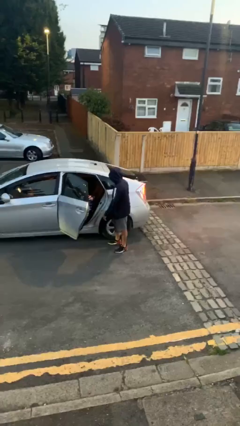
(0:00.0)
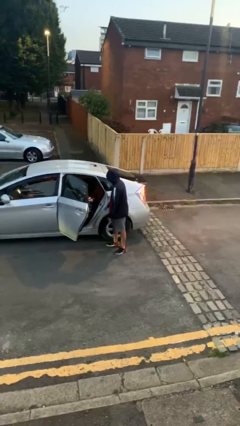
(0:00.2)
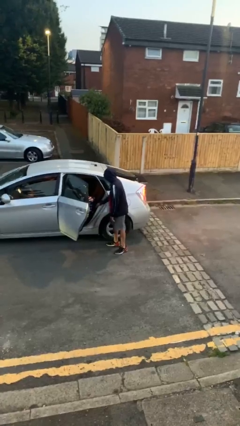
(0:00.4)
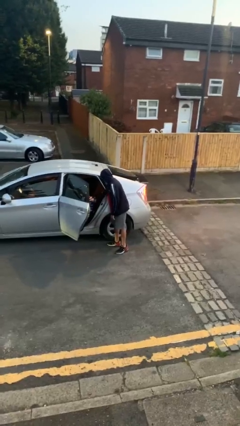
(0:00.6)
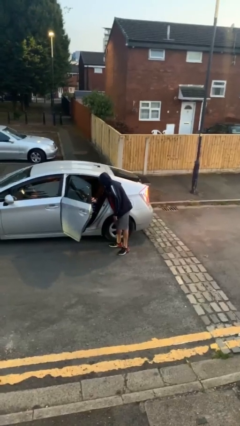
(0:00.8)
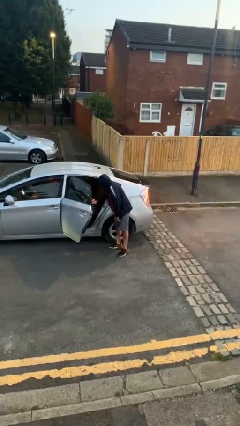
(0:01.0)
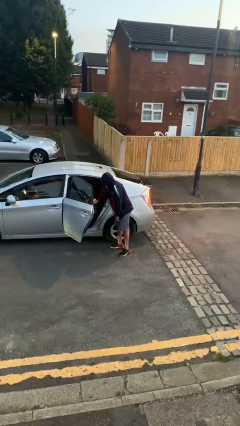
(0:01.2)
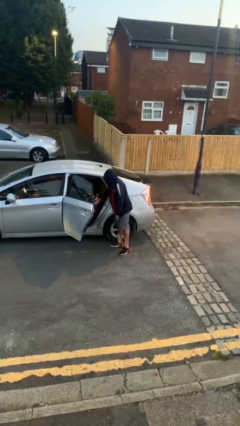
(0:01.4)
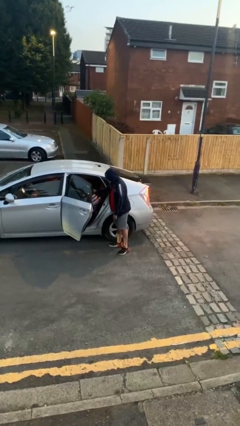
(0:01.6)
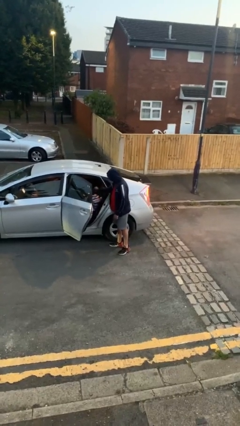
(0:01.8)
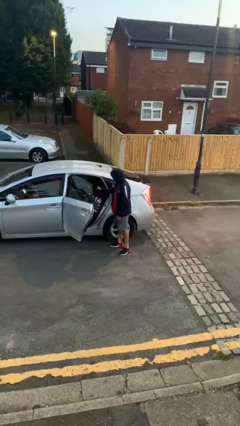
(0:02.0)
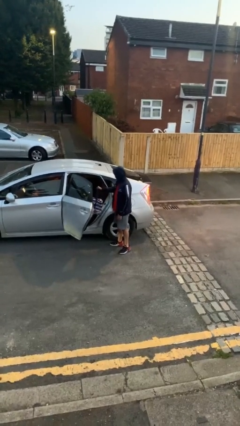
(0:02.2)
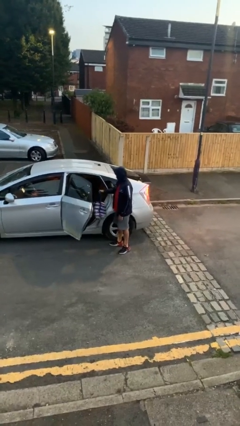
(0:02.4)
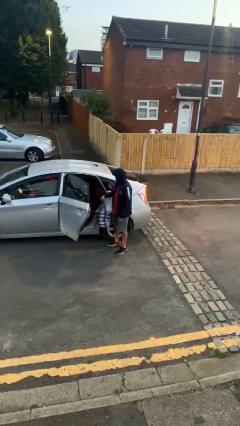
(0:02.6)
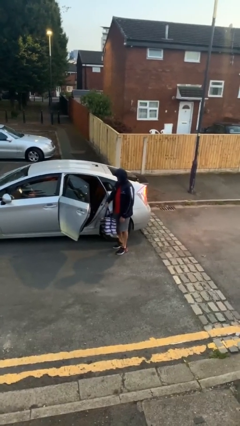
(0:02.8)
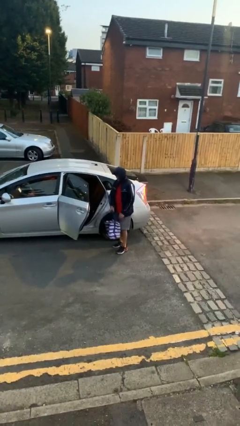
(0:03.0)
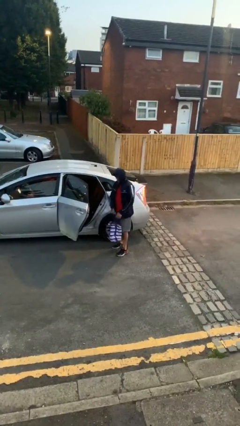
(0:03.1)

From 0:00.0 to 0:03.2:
person unloads car

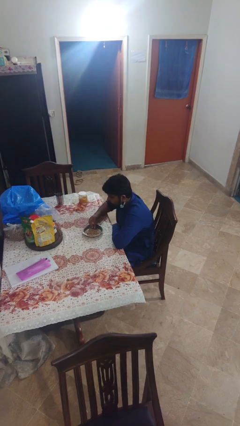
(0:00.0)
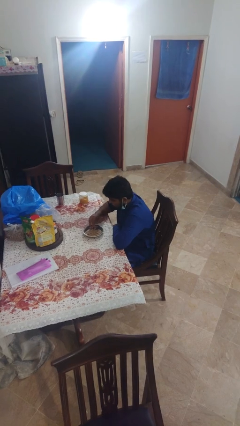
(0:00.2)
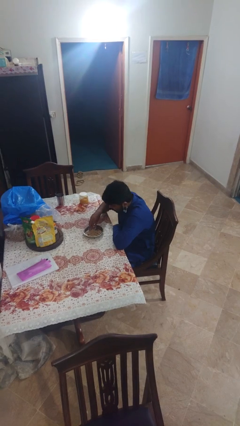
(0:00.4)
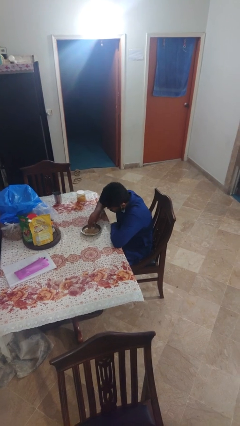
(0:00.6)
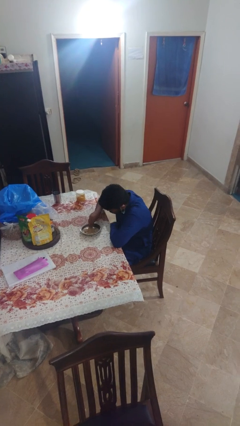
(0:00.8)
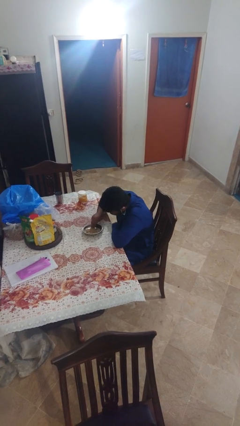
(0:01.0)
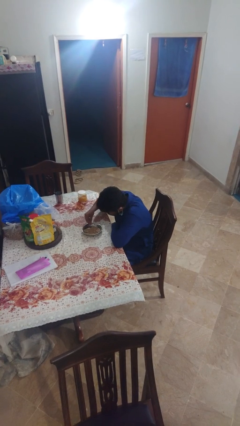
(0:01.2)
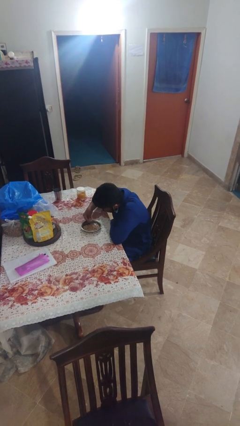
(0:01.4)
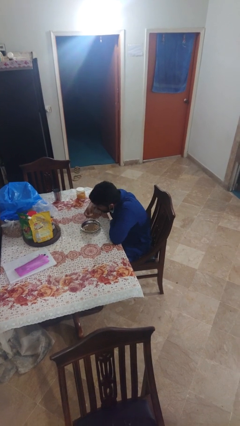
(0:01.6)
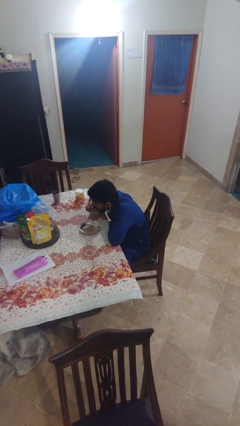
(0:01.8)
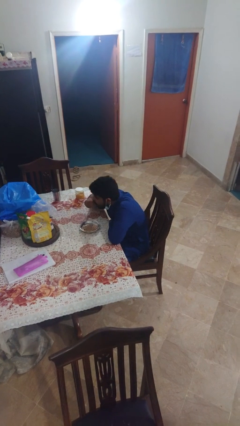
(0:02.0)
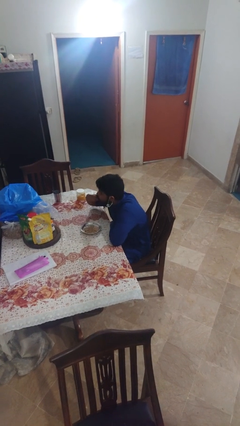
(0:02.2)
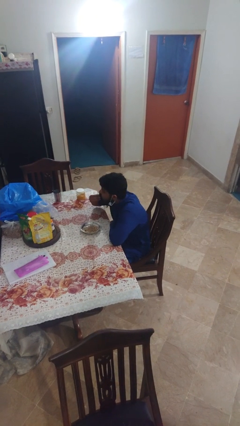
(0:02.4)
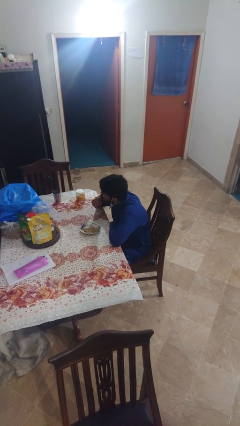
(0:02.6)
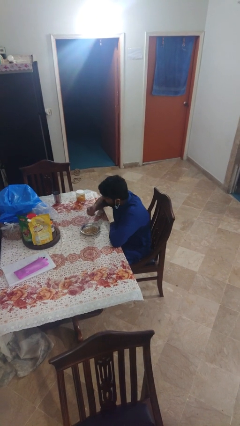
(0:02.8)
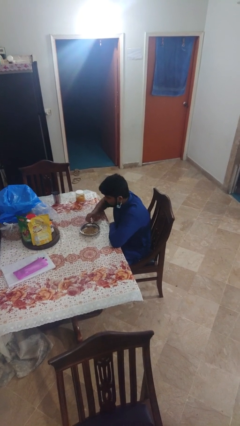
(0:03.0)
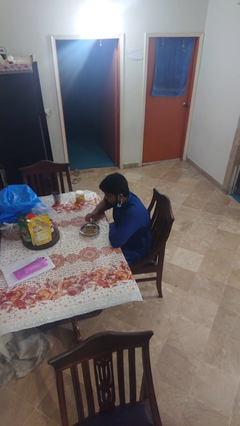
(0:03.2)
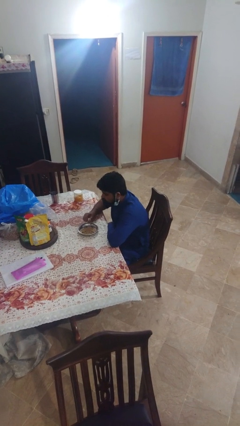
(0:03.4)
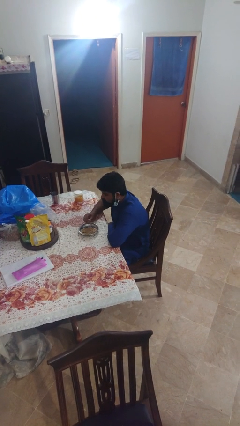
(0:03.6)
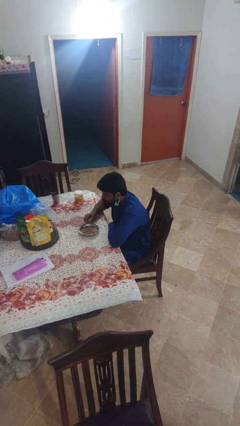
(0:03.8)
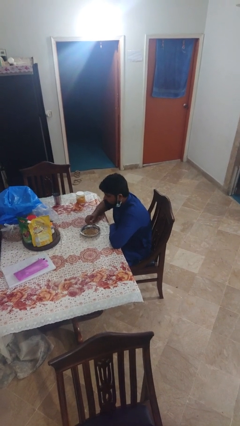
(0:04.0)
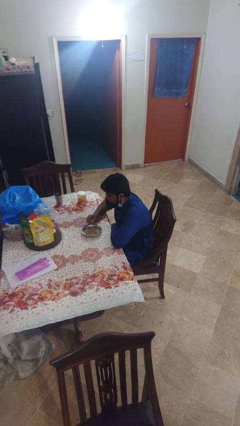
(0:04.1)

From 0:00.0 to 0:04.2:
person eats with hands

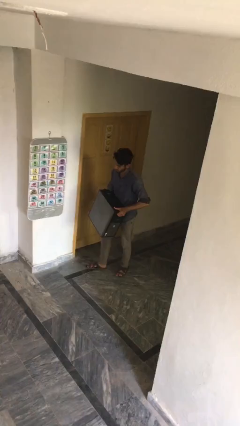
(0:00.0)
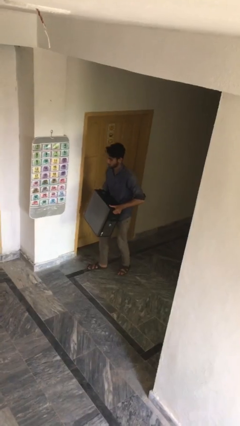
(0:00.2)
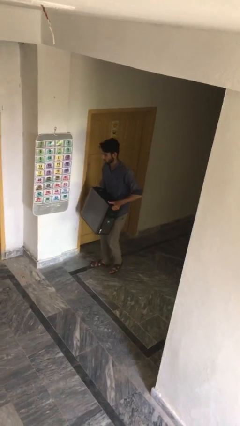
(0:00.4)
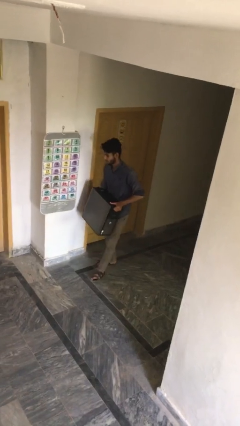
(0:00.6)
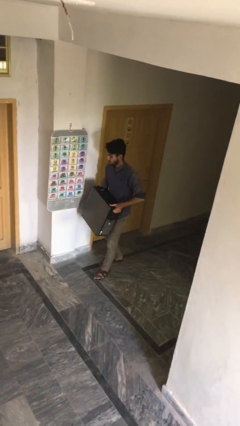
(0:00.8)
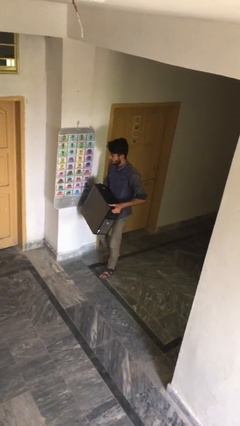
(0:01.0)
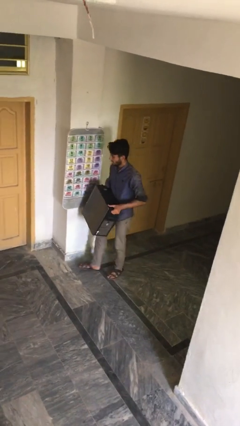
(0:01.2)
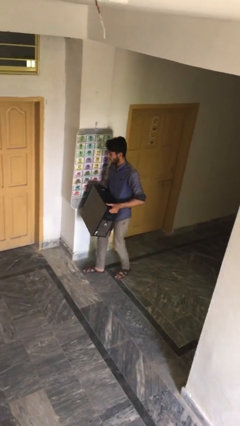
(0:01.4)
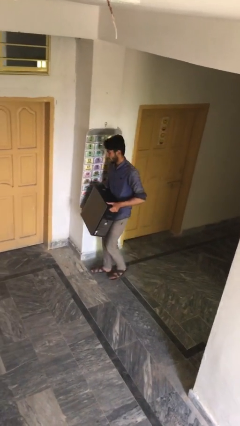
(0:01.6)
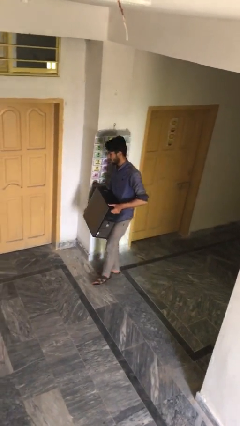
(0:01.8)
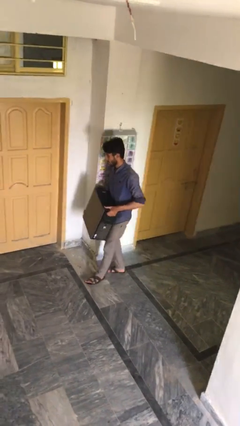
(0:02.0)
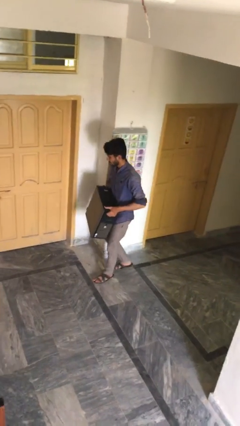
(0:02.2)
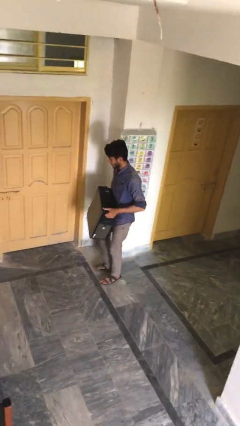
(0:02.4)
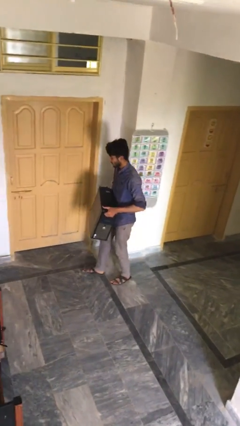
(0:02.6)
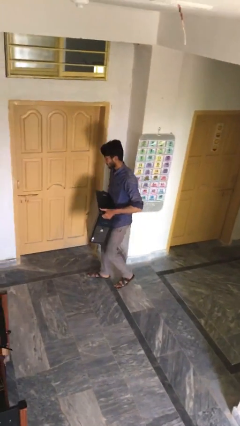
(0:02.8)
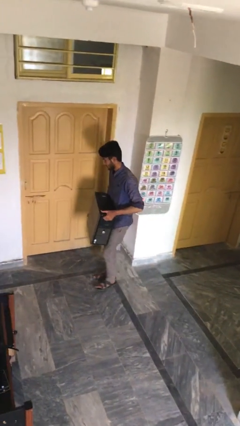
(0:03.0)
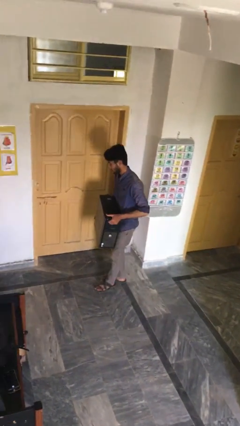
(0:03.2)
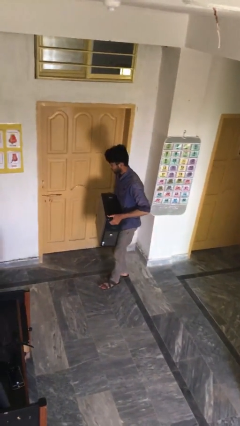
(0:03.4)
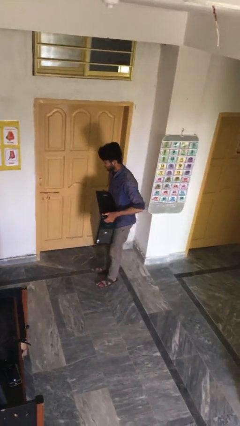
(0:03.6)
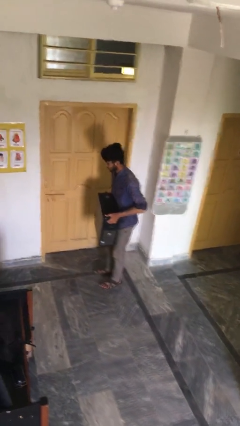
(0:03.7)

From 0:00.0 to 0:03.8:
person carries heavy object

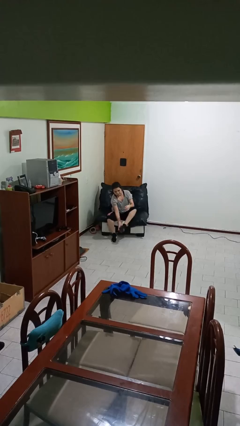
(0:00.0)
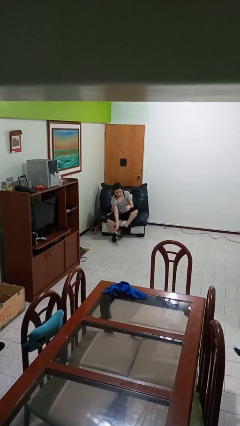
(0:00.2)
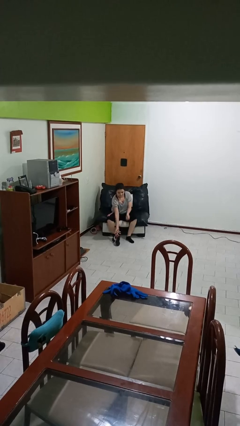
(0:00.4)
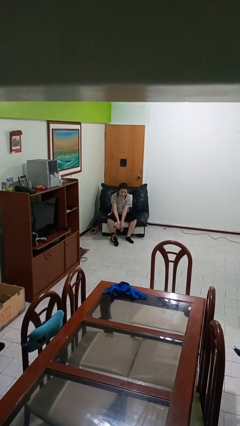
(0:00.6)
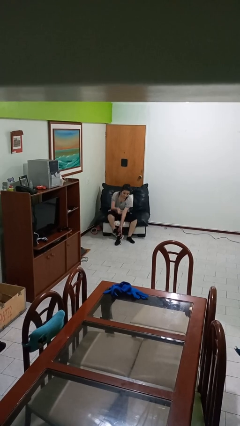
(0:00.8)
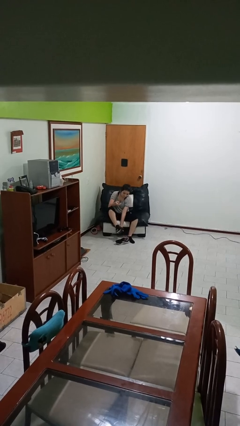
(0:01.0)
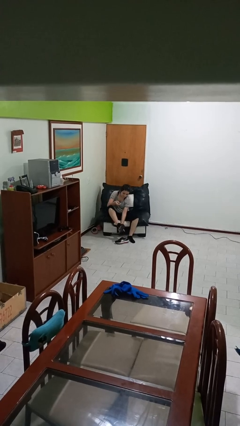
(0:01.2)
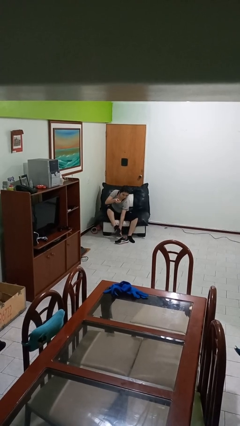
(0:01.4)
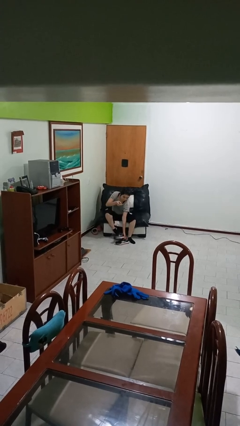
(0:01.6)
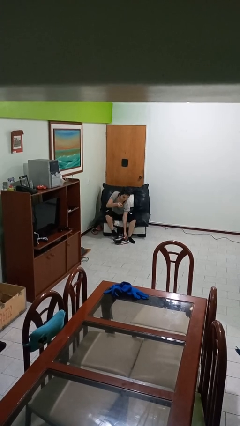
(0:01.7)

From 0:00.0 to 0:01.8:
person takes off shoes

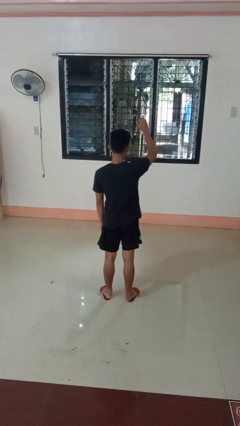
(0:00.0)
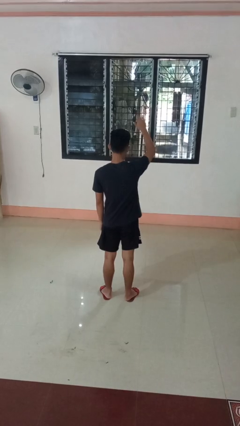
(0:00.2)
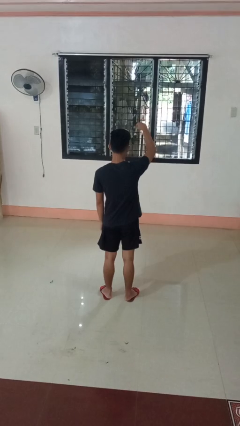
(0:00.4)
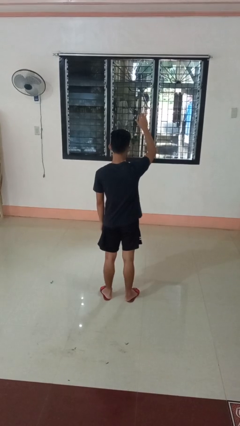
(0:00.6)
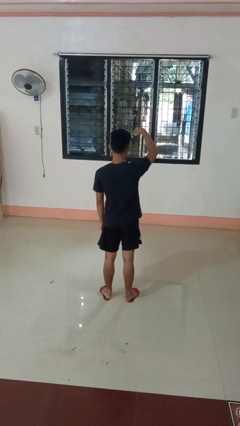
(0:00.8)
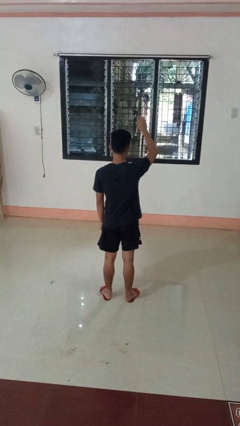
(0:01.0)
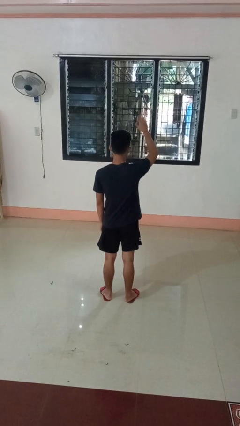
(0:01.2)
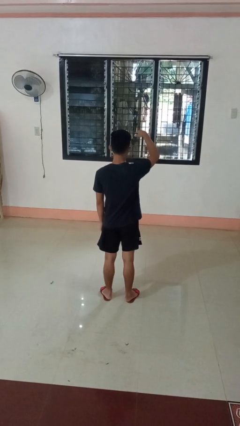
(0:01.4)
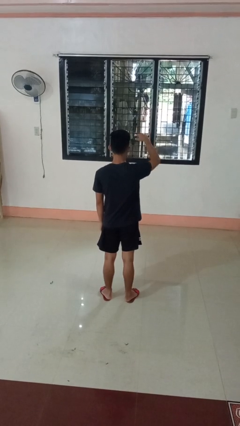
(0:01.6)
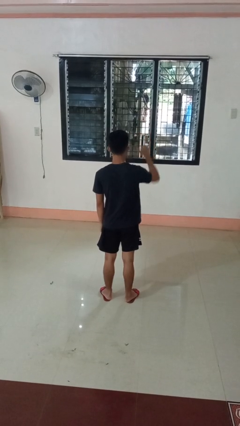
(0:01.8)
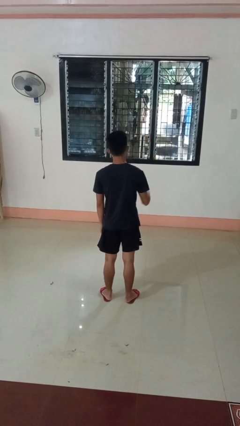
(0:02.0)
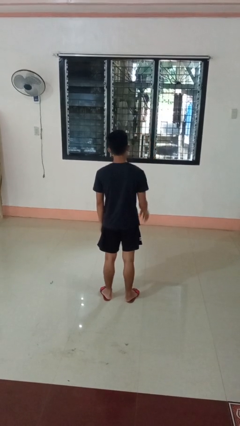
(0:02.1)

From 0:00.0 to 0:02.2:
person gestures come here

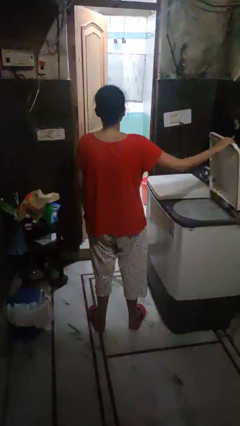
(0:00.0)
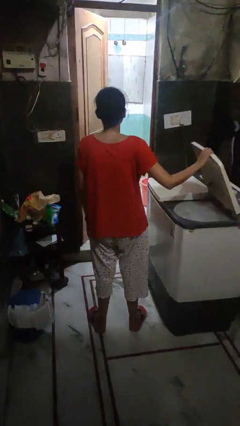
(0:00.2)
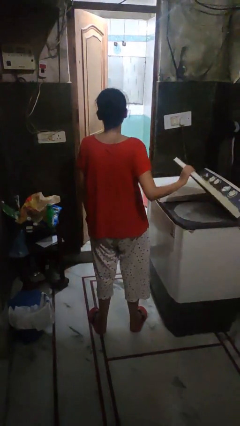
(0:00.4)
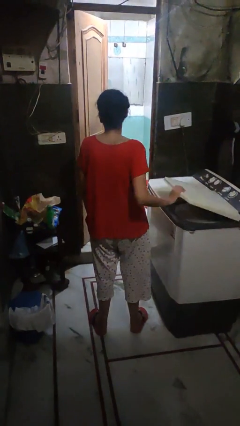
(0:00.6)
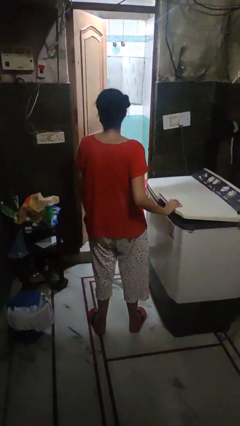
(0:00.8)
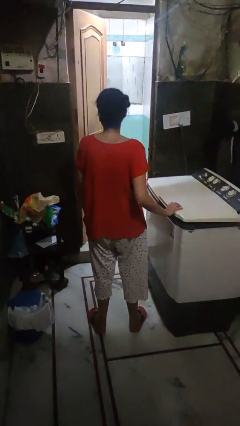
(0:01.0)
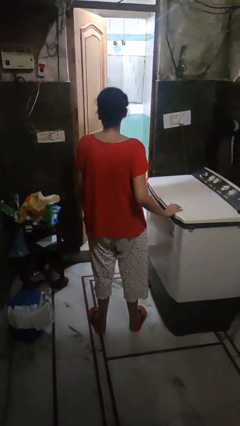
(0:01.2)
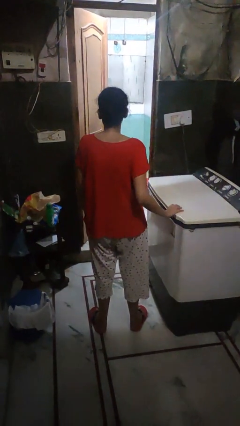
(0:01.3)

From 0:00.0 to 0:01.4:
person closes clothes washer

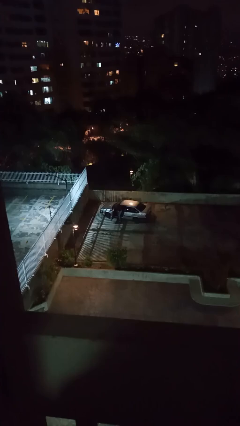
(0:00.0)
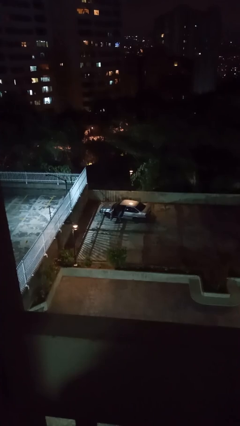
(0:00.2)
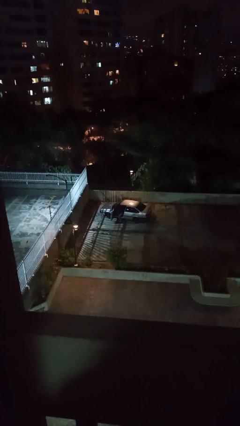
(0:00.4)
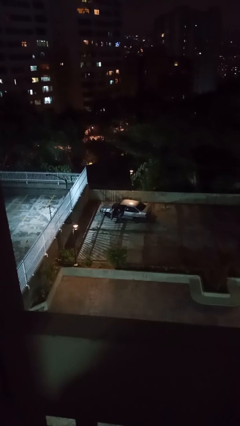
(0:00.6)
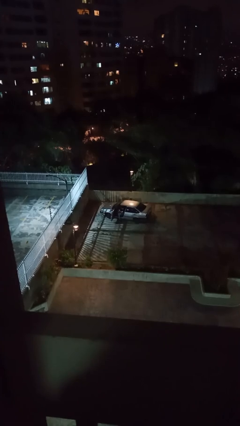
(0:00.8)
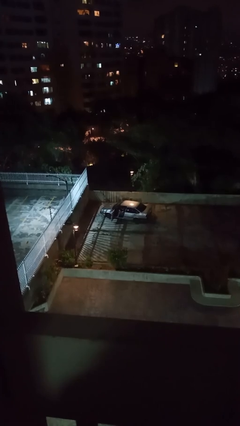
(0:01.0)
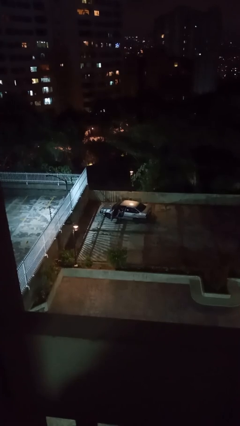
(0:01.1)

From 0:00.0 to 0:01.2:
person enters car
